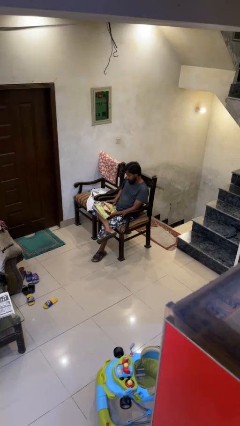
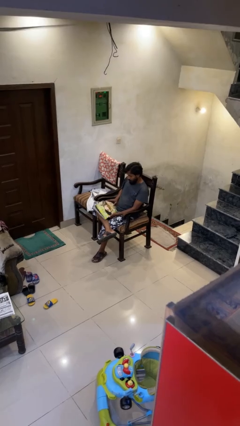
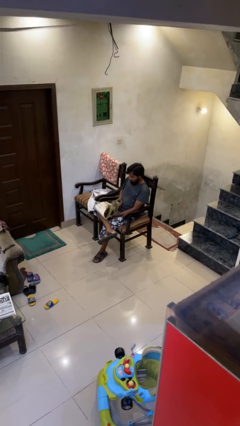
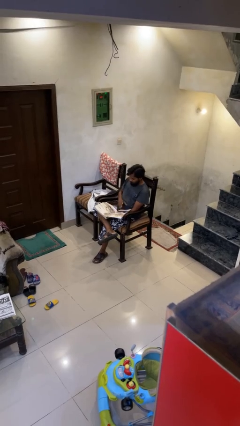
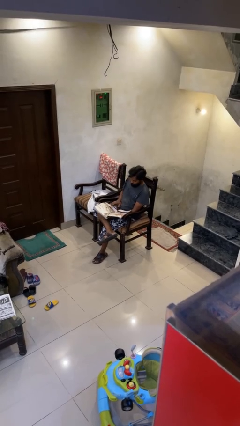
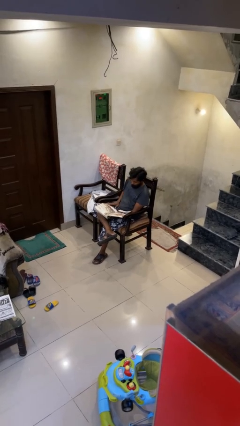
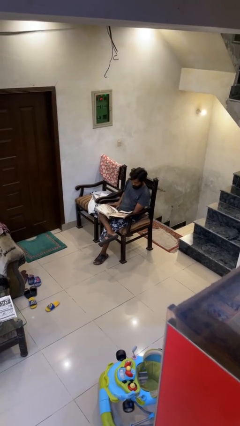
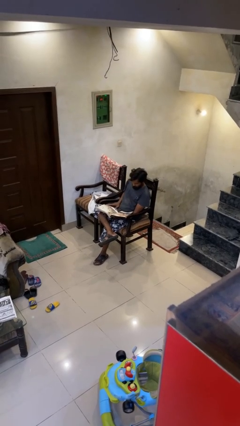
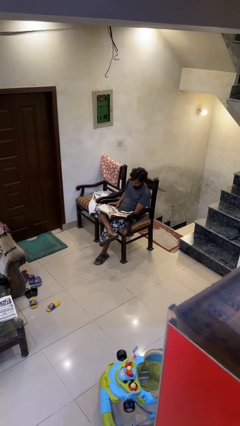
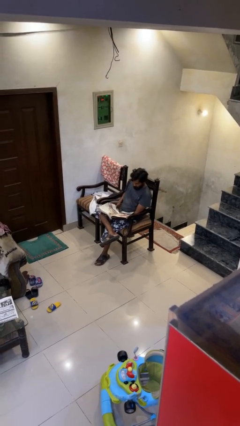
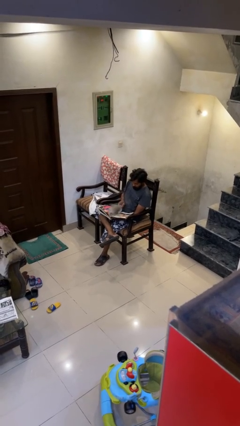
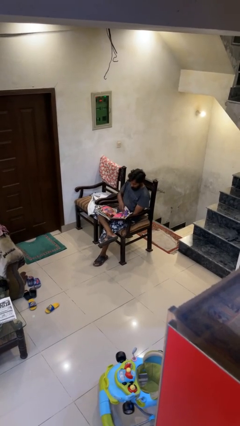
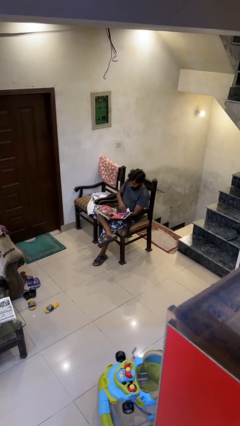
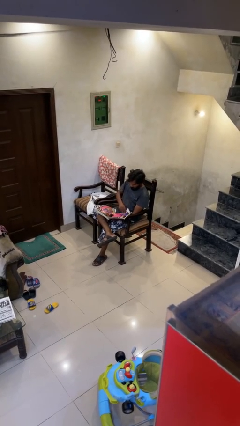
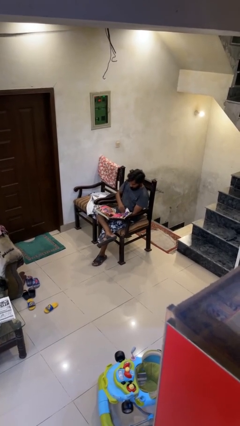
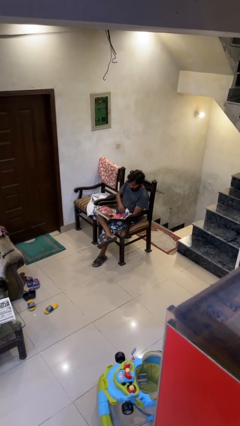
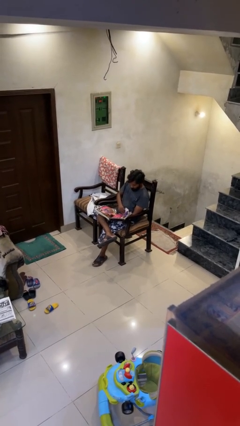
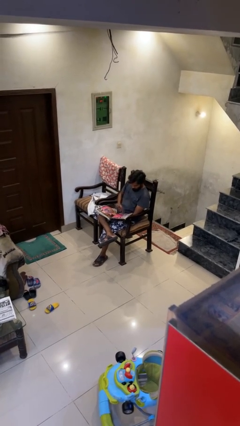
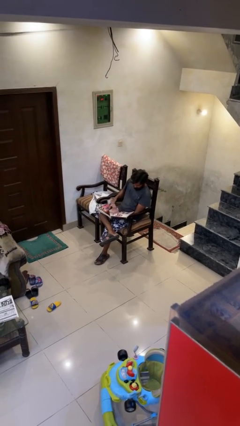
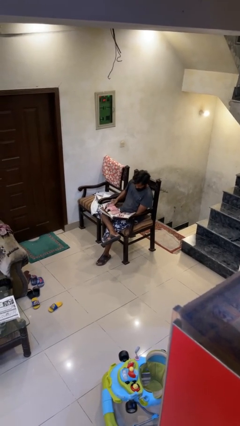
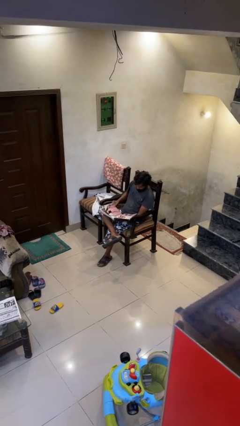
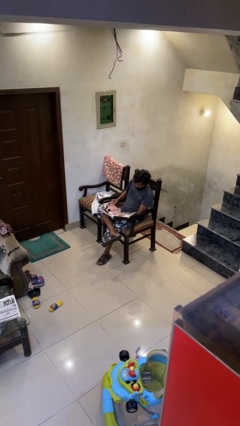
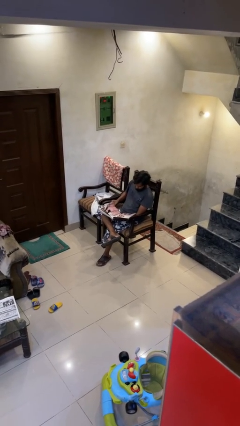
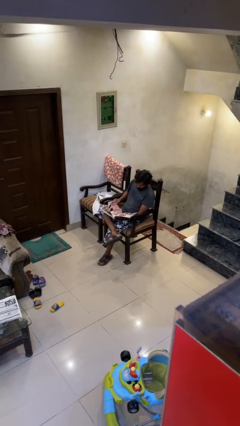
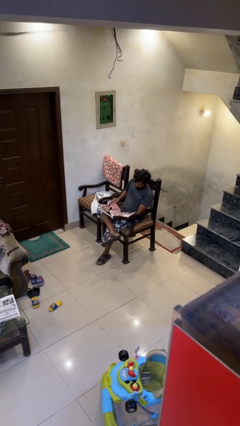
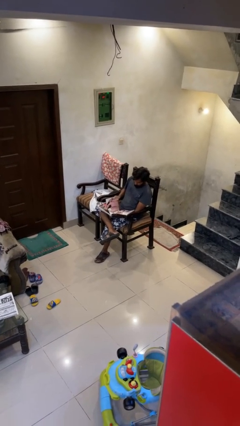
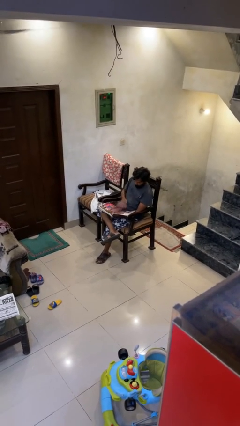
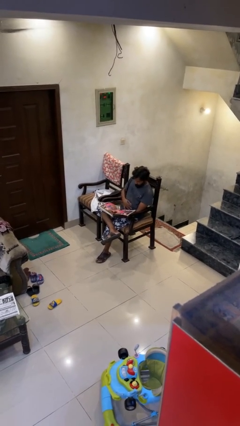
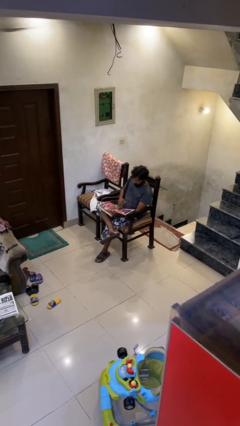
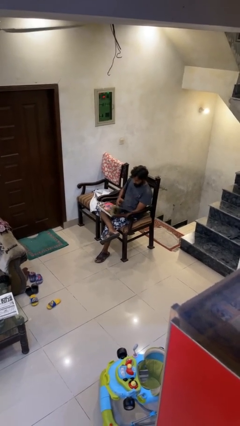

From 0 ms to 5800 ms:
person reads magazine

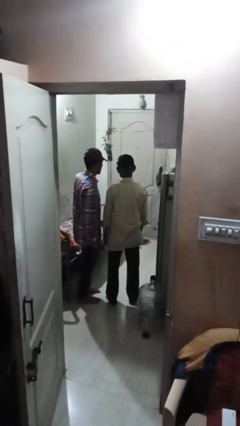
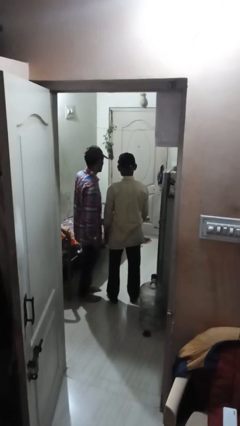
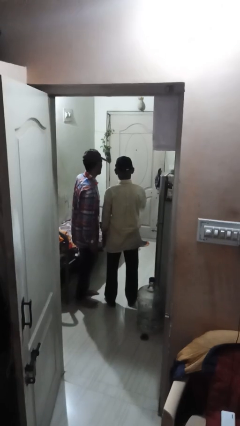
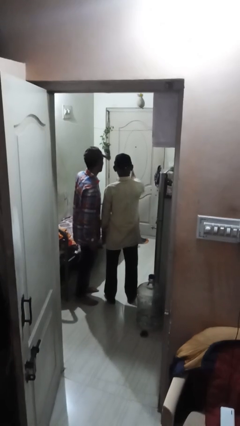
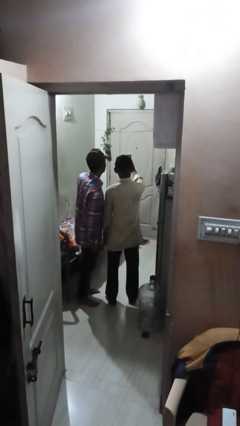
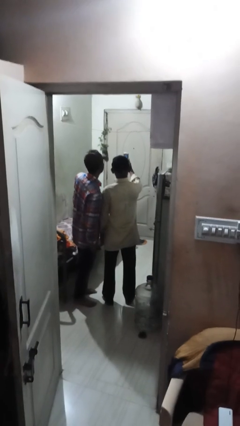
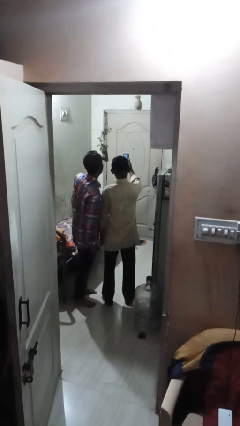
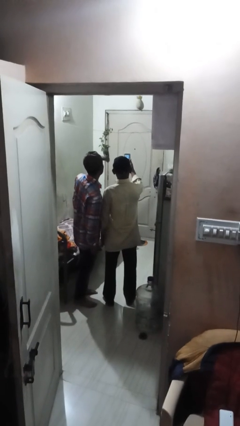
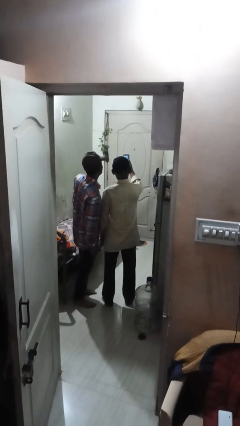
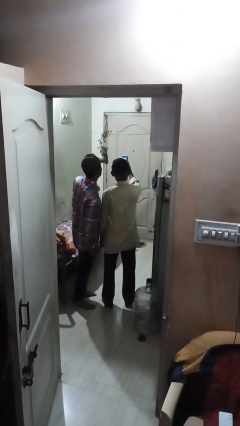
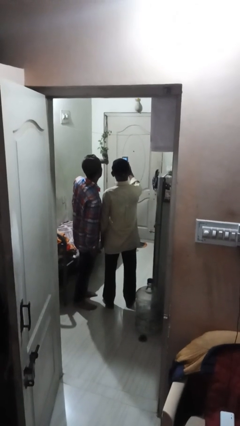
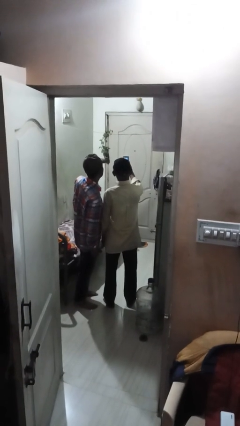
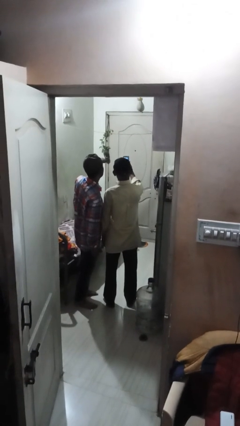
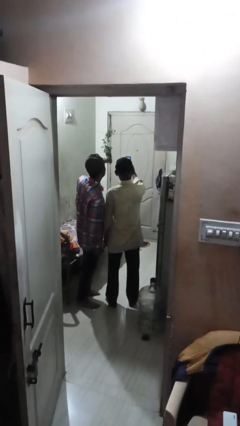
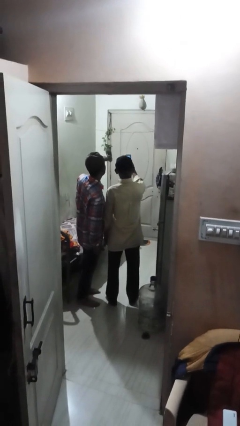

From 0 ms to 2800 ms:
person takes selfie with person

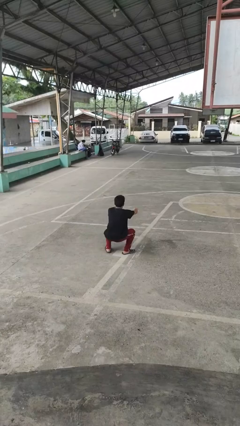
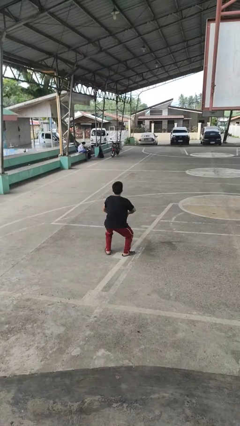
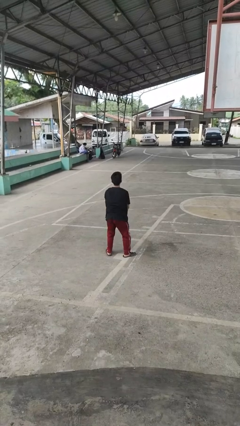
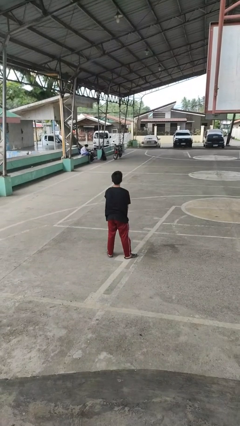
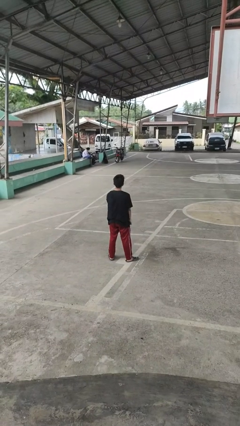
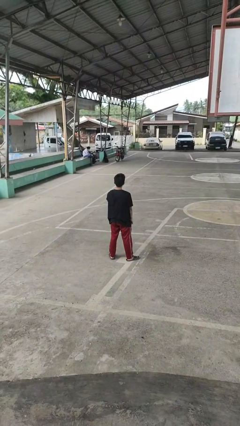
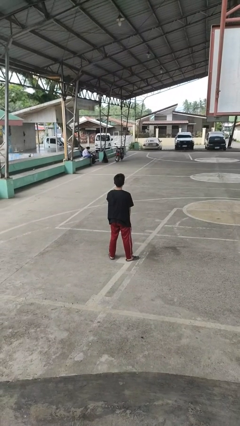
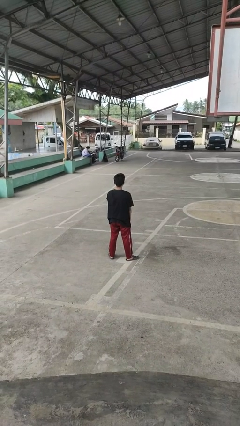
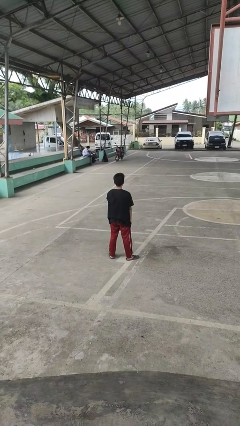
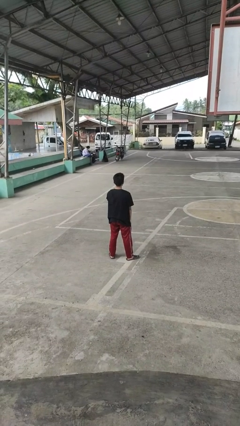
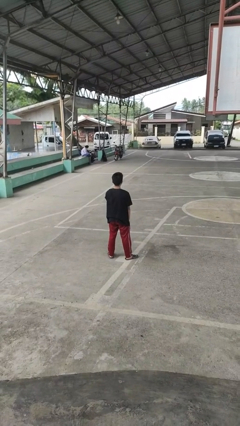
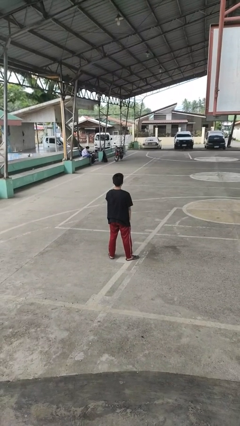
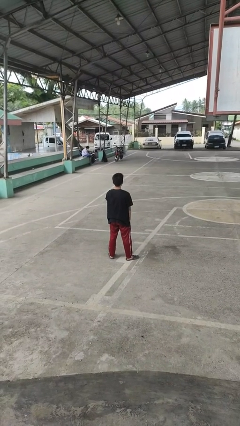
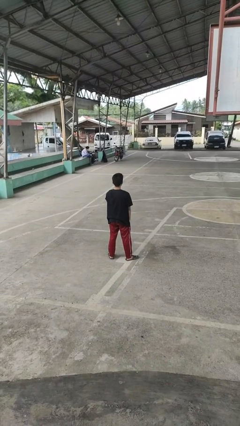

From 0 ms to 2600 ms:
person stands up

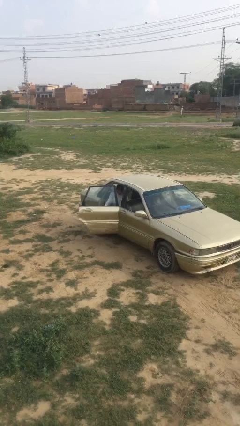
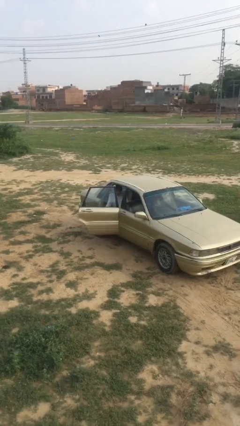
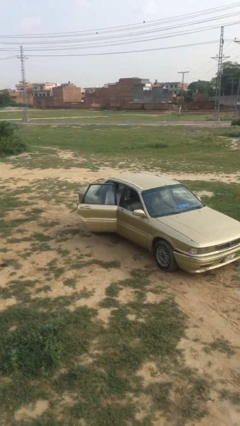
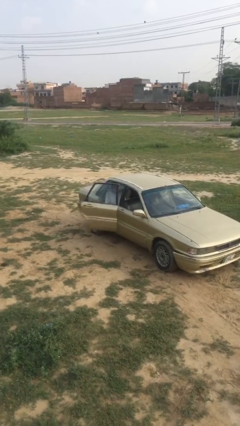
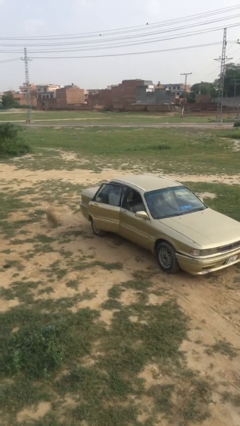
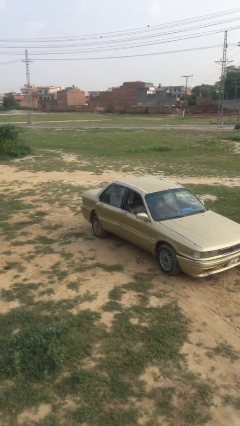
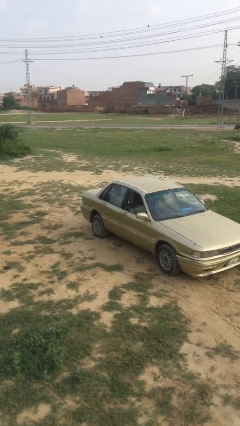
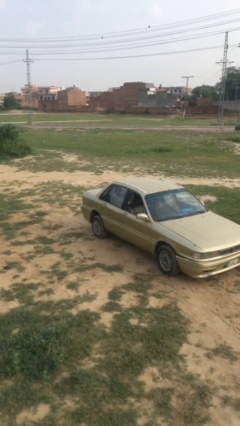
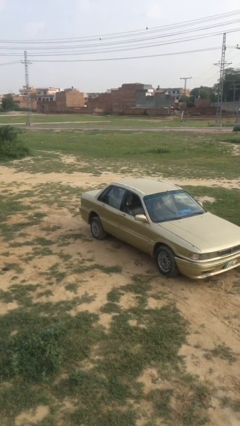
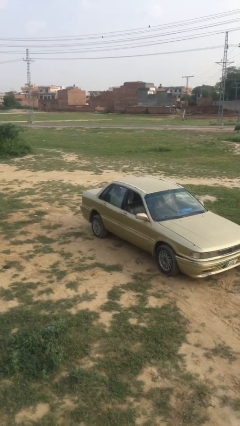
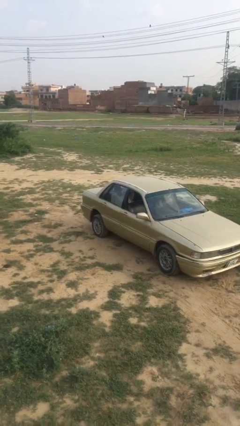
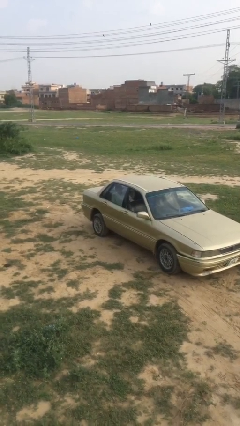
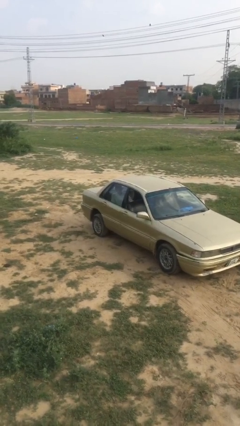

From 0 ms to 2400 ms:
person closes car door

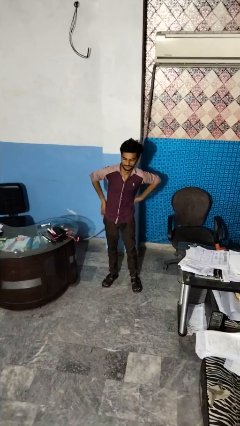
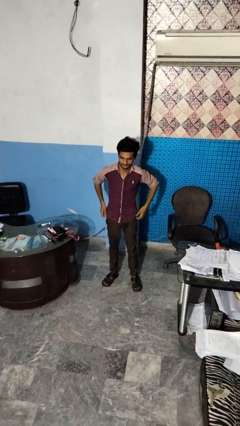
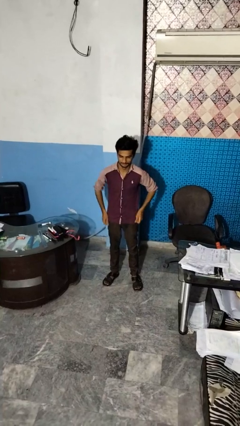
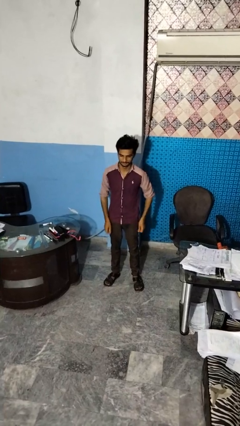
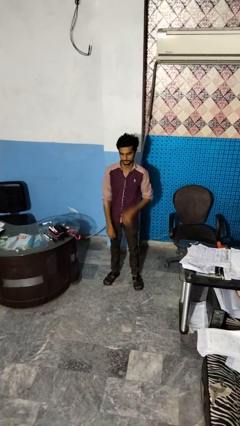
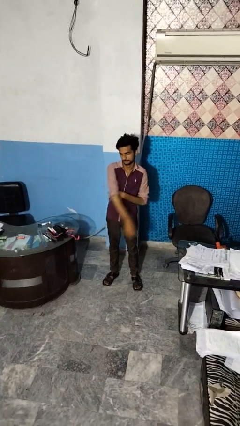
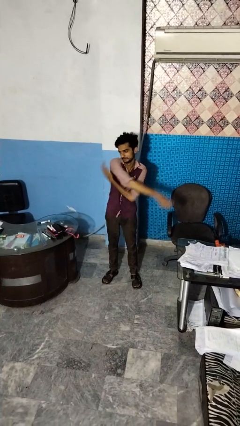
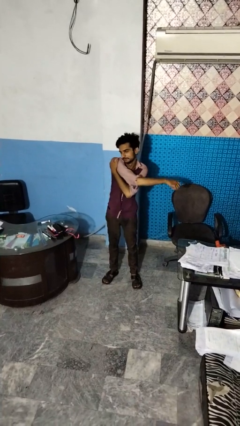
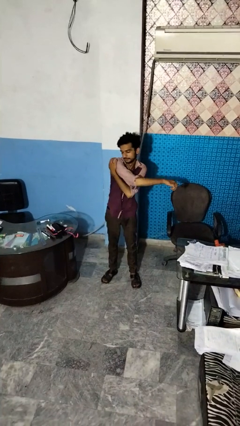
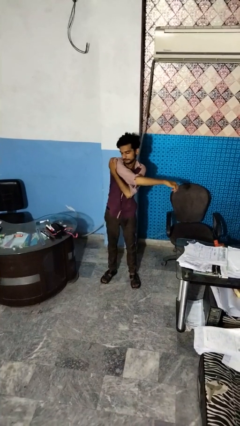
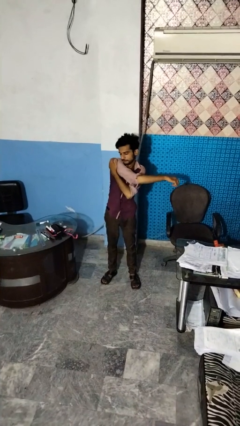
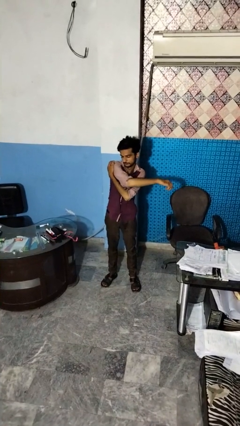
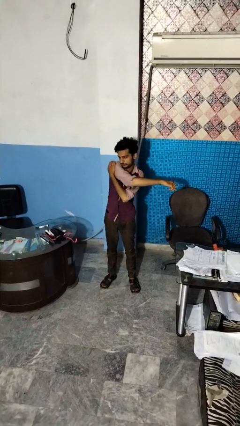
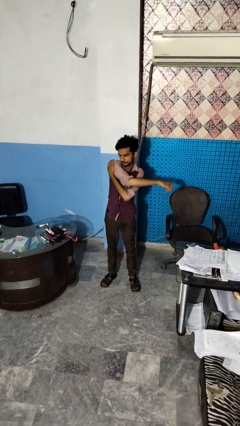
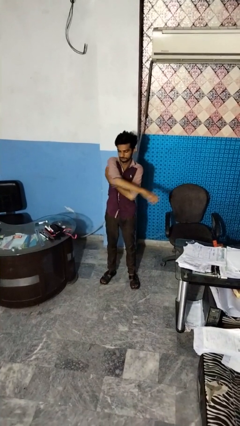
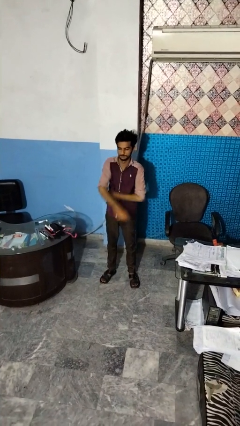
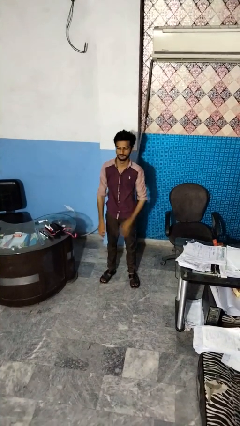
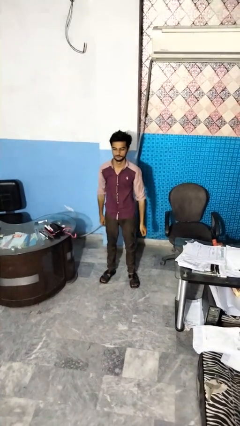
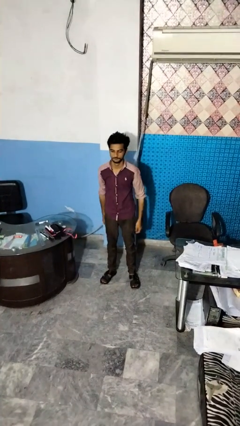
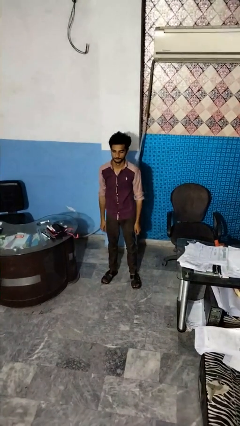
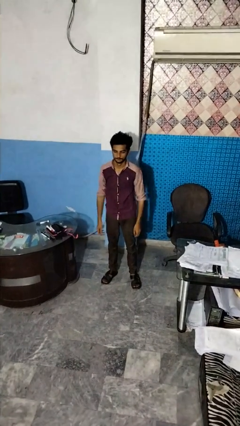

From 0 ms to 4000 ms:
person stretches arms to side

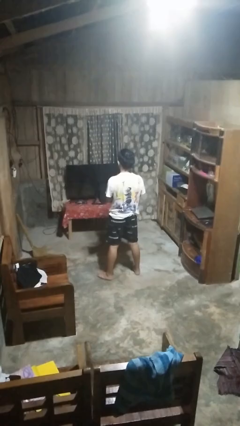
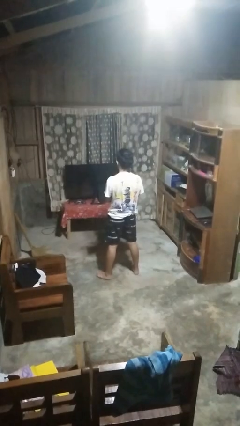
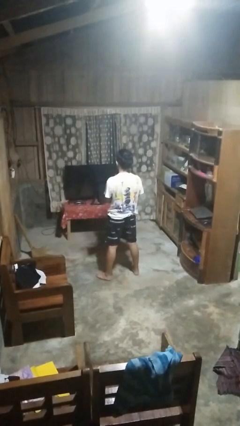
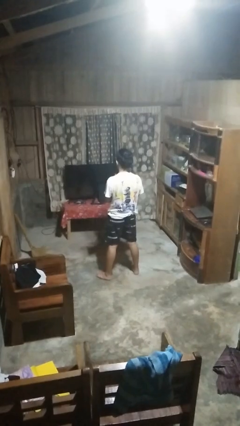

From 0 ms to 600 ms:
person punches
